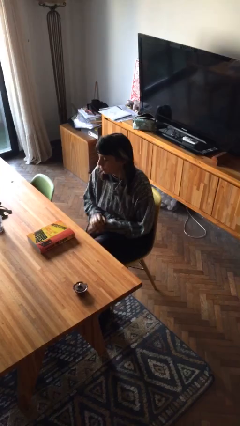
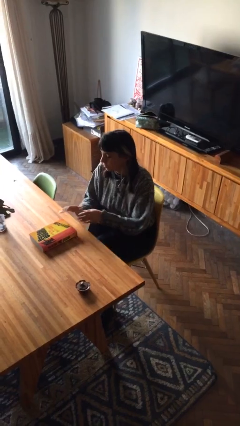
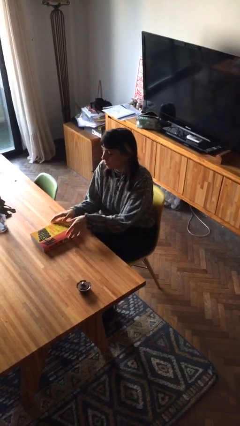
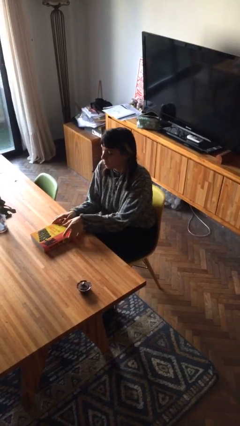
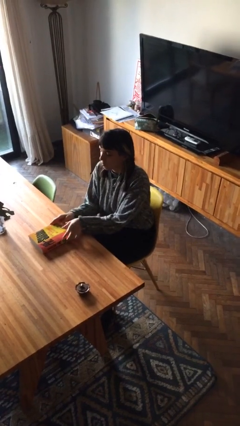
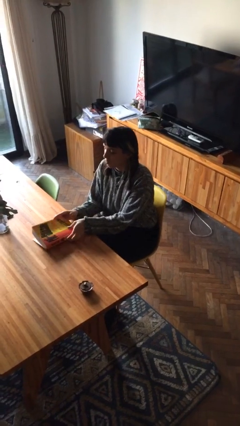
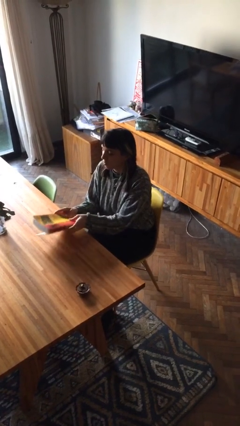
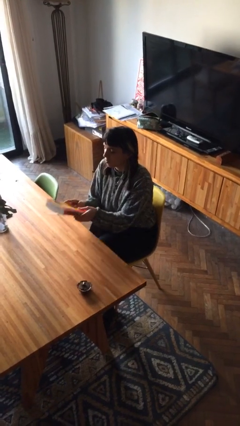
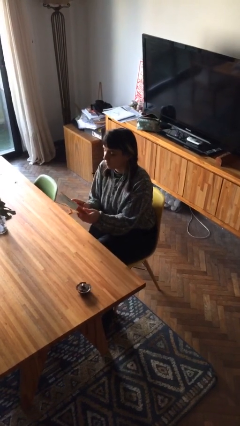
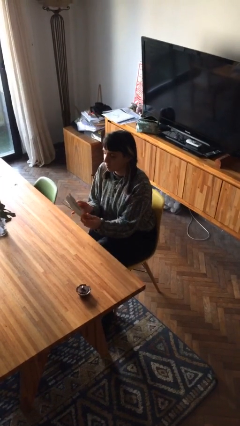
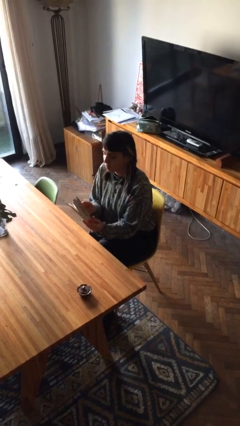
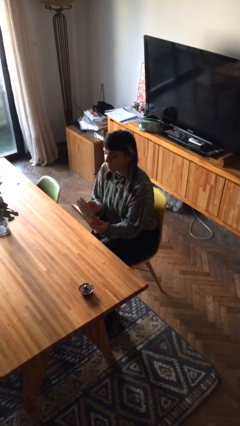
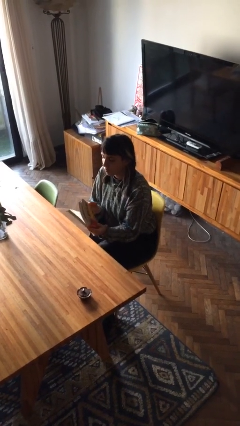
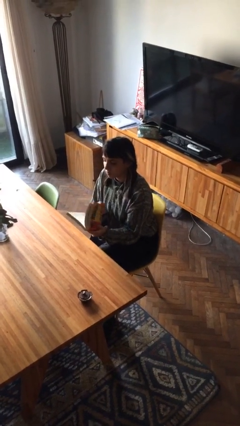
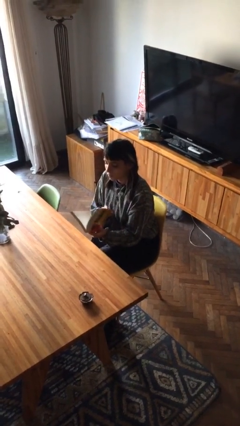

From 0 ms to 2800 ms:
person picks up object from table

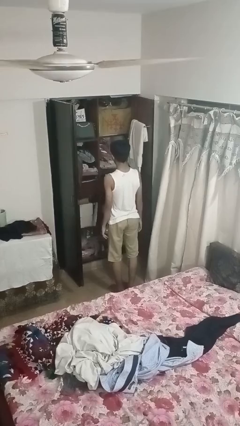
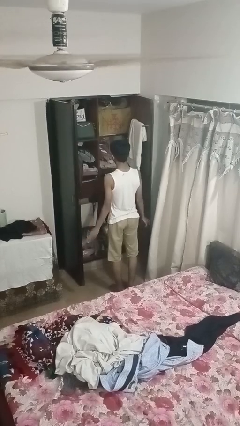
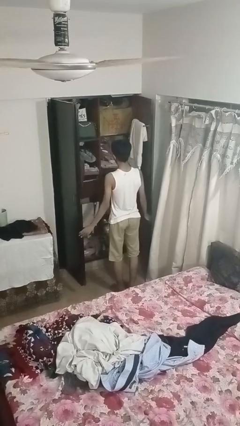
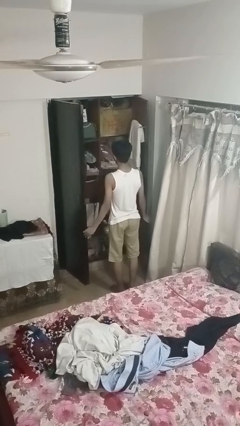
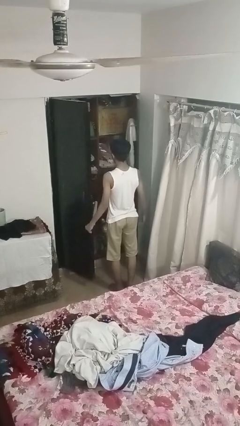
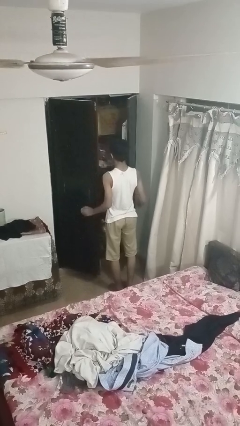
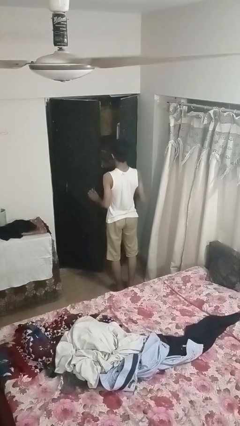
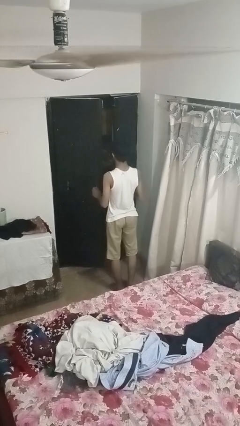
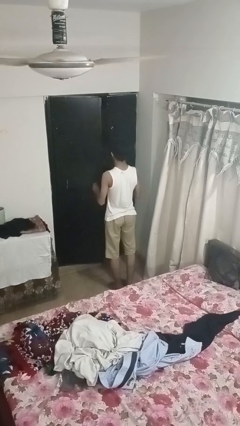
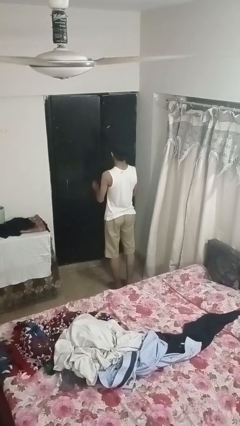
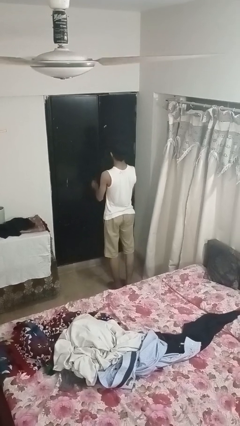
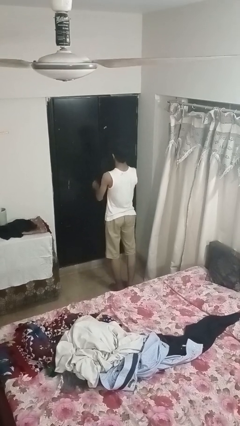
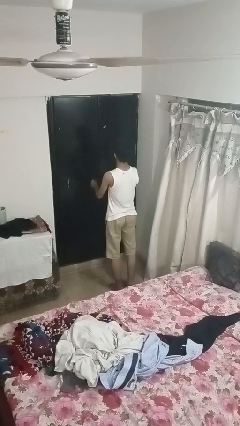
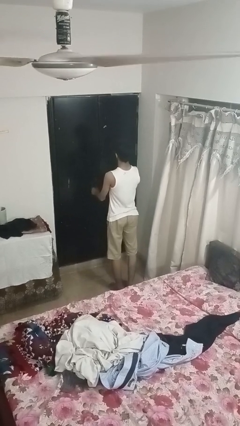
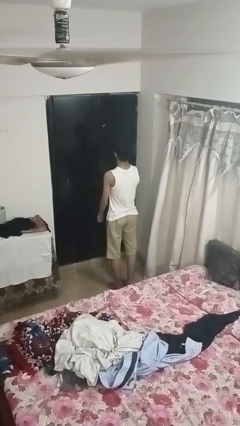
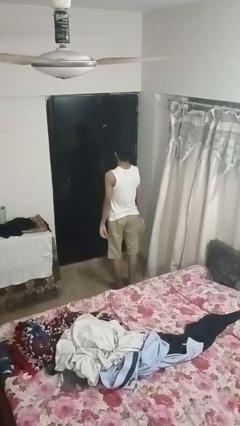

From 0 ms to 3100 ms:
person closes closet door

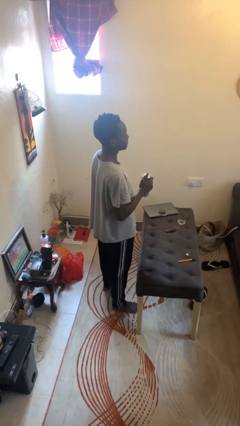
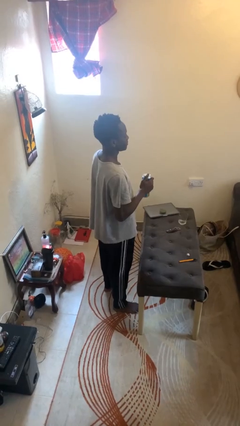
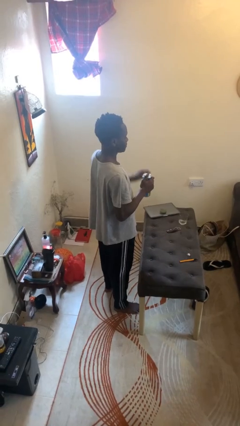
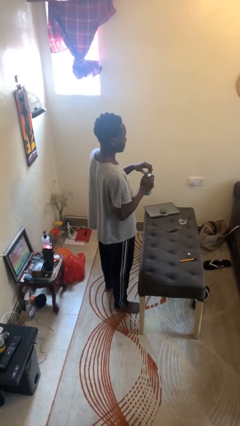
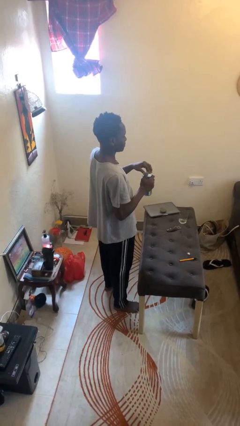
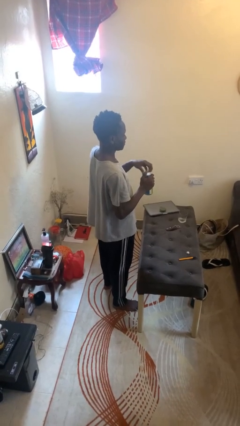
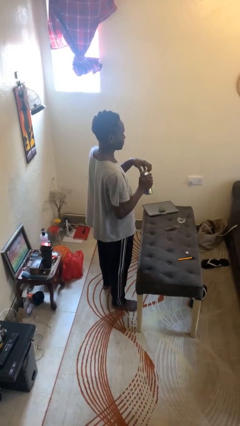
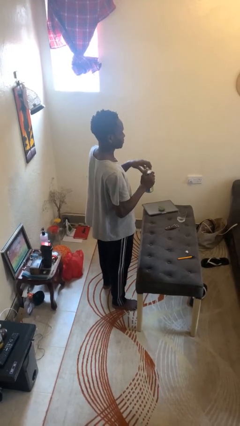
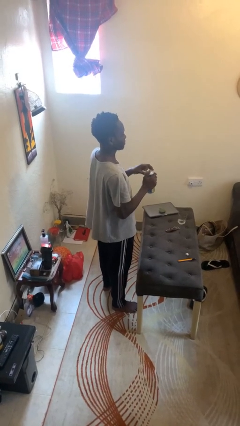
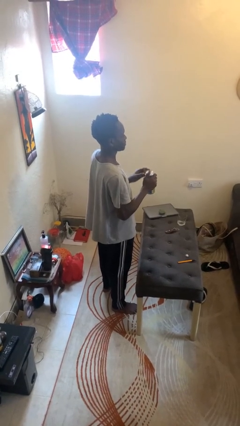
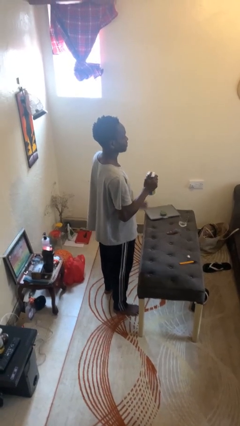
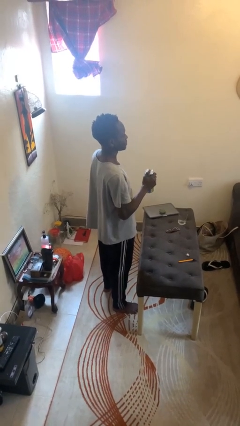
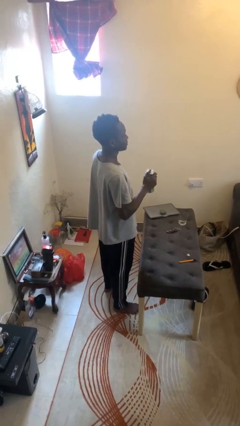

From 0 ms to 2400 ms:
person opens beverage can

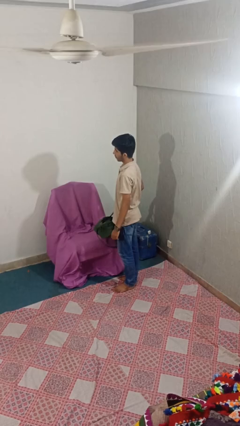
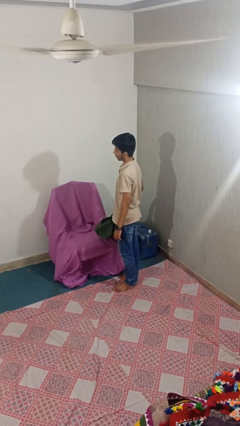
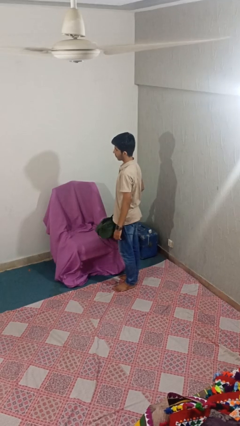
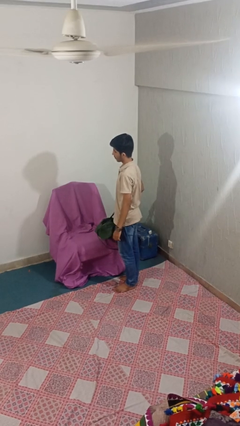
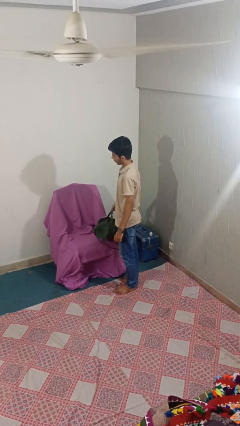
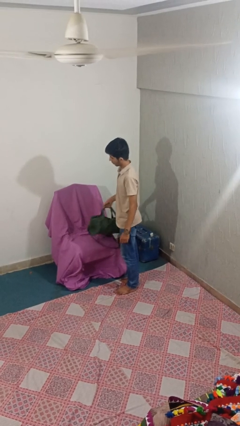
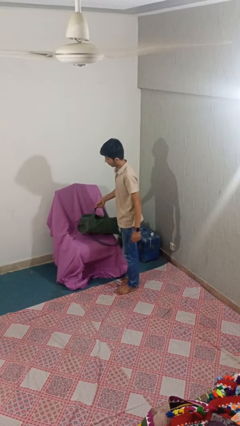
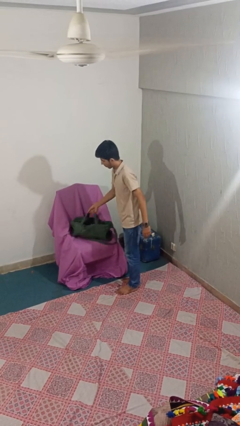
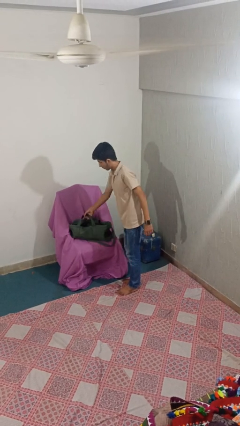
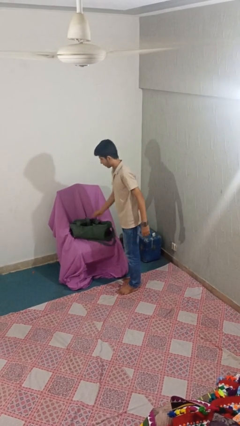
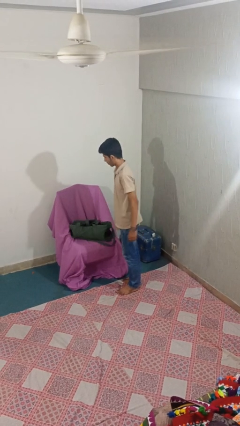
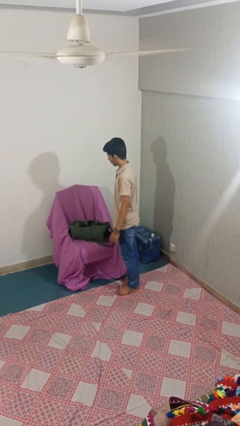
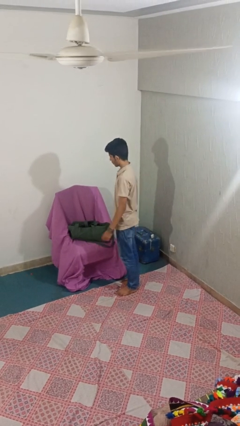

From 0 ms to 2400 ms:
person puts down object on couch

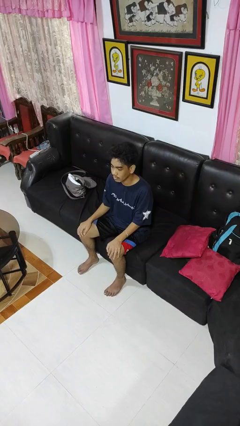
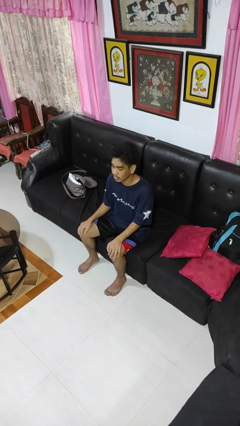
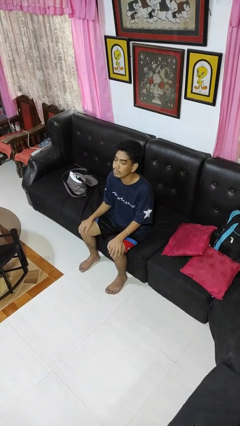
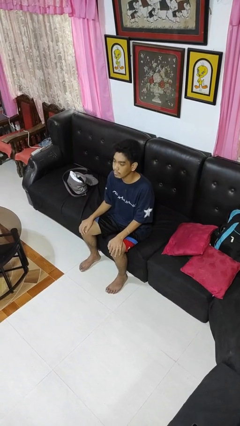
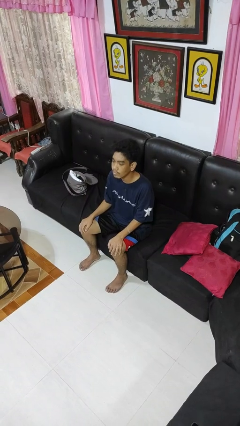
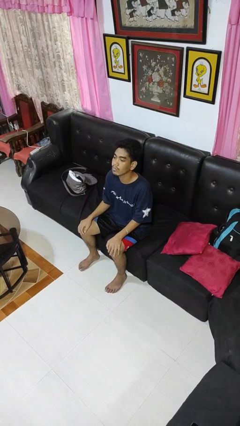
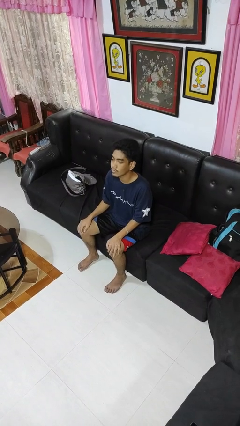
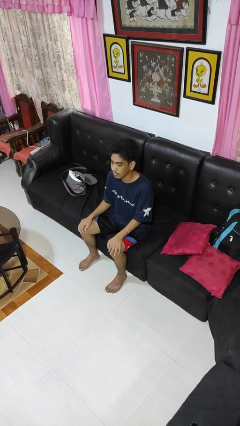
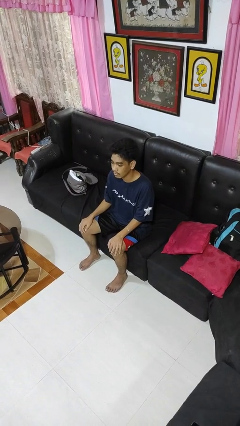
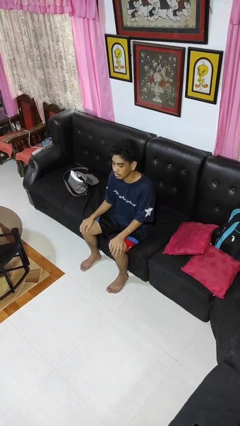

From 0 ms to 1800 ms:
person nods head

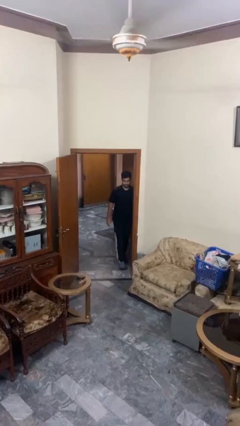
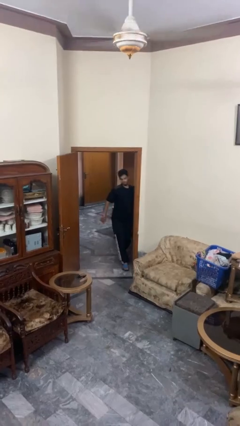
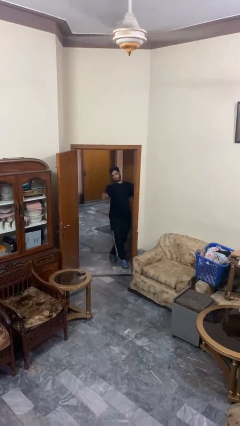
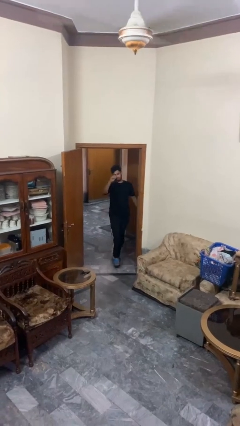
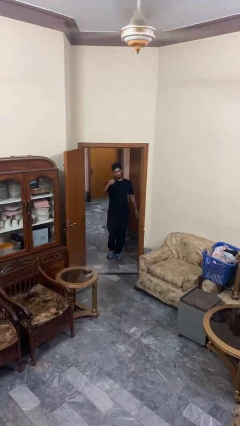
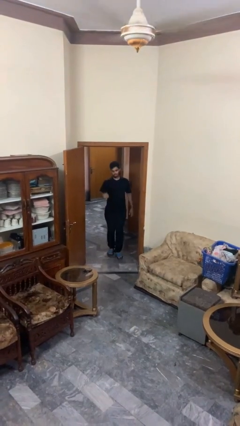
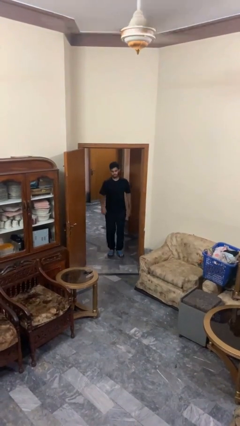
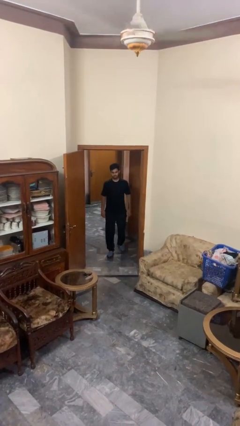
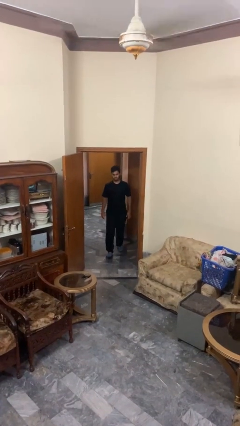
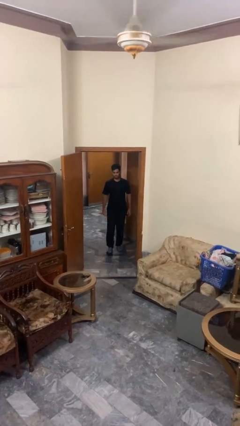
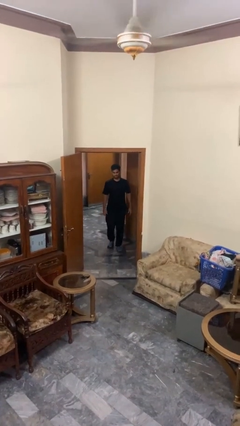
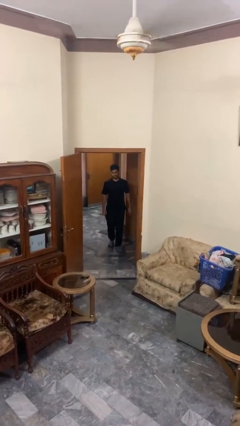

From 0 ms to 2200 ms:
person bumps into wall

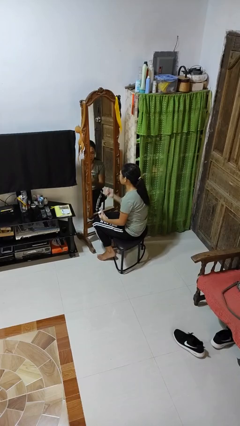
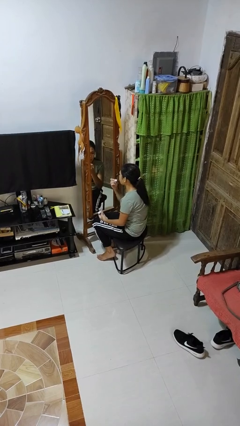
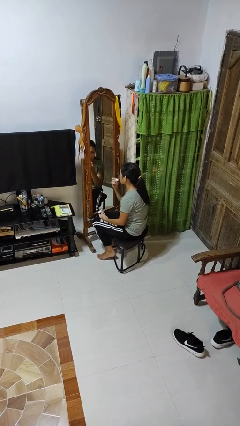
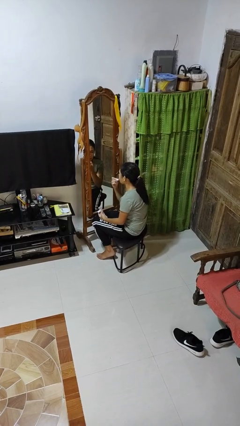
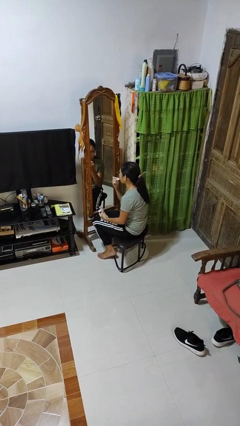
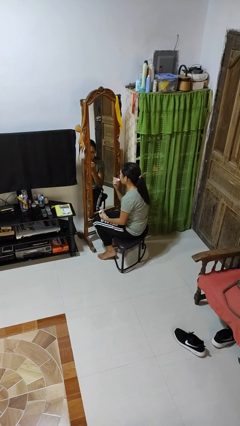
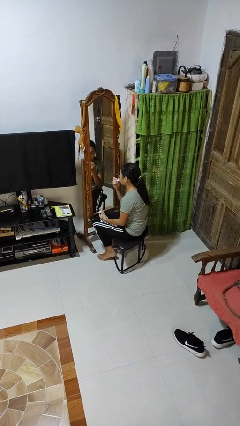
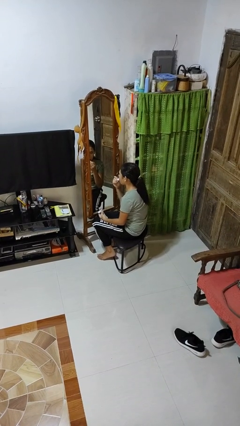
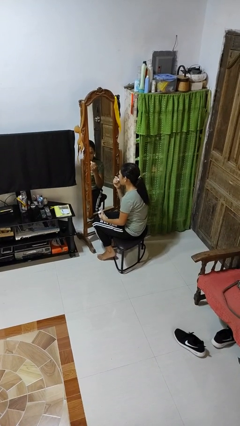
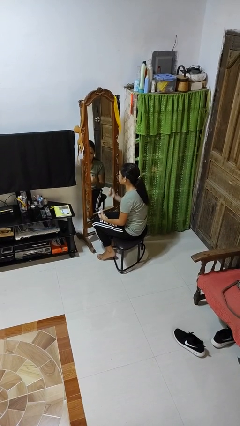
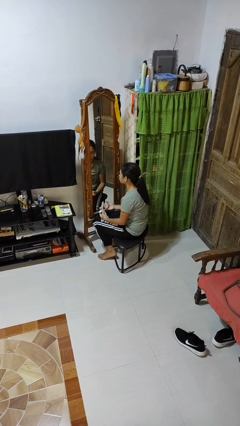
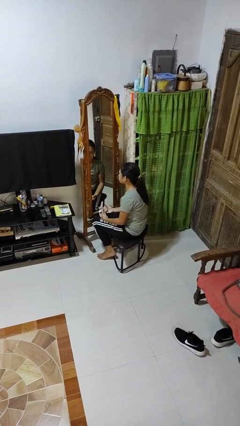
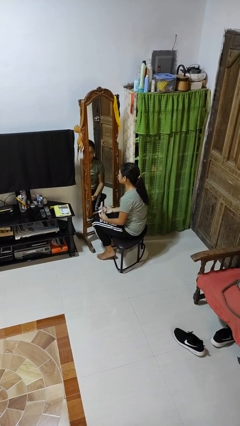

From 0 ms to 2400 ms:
person applies lip makeup

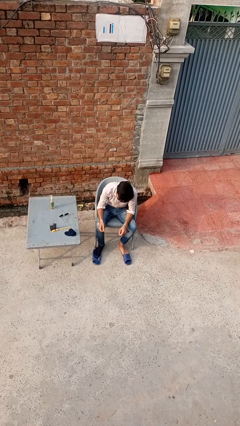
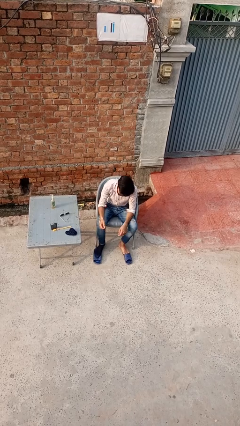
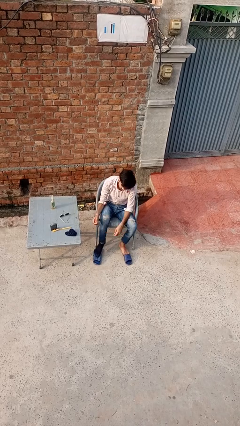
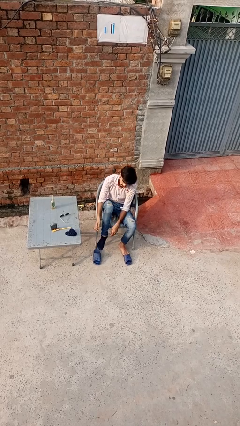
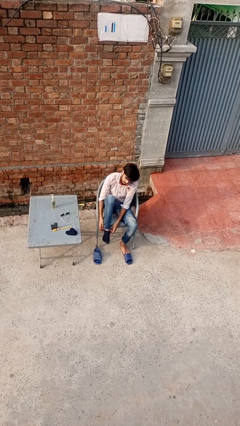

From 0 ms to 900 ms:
person takes off socks
